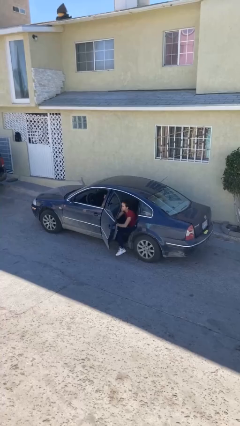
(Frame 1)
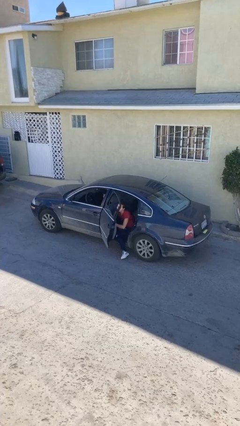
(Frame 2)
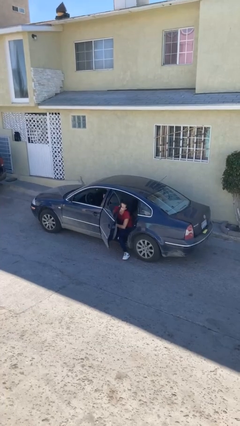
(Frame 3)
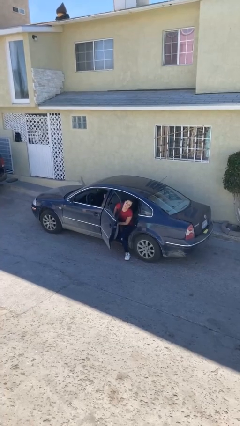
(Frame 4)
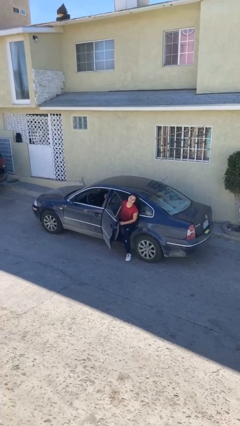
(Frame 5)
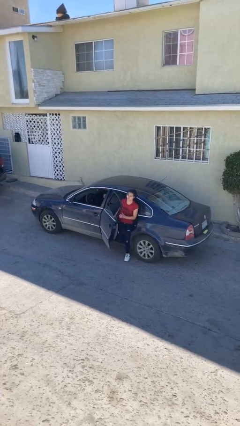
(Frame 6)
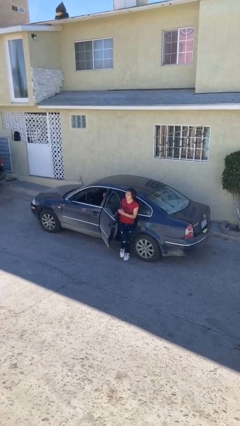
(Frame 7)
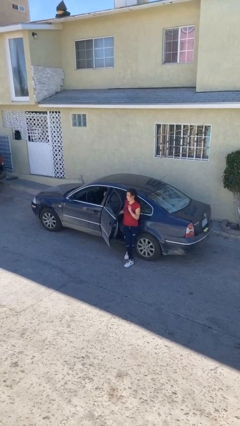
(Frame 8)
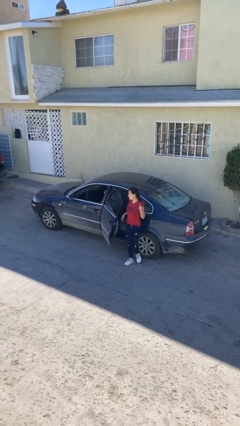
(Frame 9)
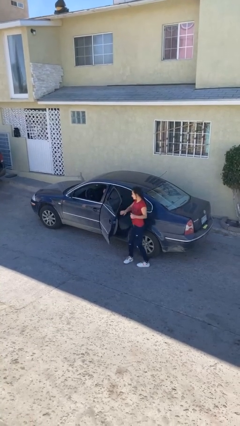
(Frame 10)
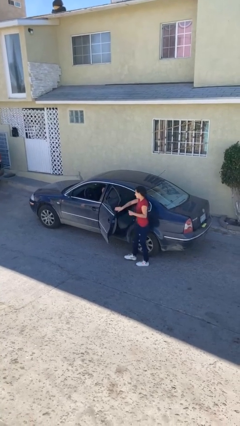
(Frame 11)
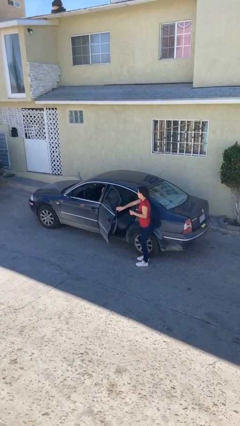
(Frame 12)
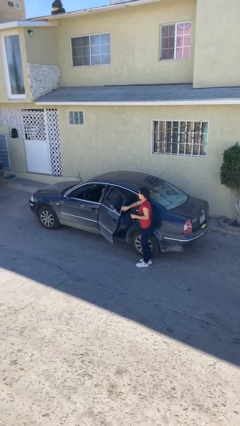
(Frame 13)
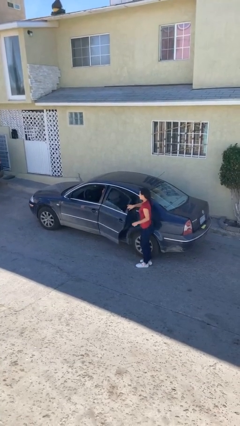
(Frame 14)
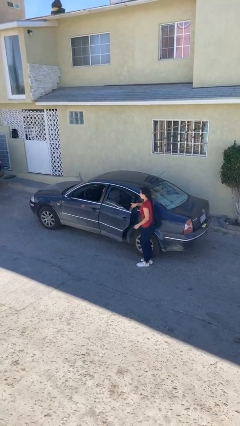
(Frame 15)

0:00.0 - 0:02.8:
car drops off person

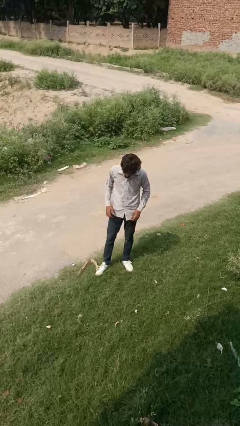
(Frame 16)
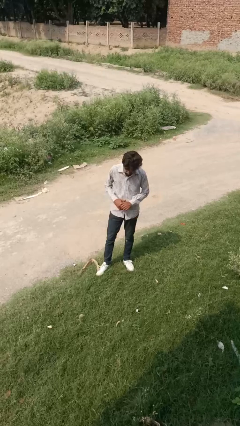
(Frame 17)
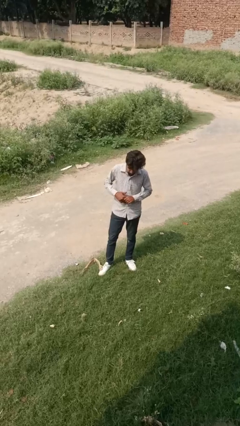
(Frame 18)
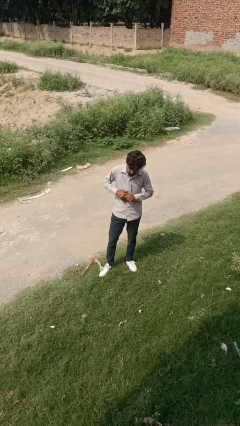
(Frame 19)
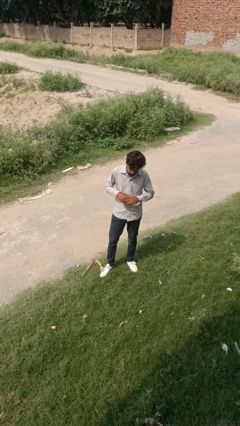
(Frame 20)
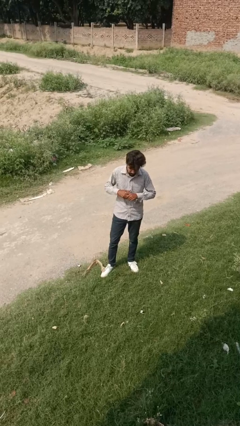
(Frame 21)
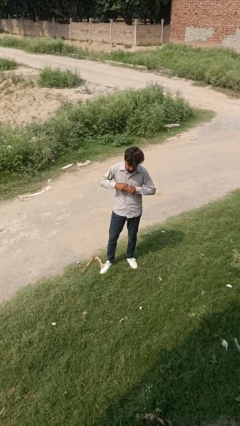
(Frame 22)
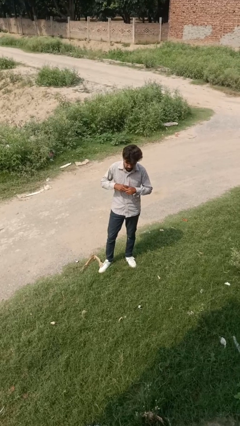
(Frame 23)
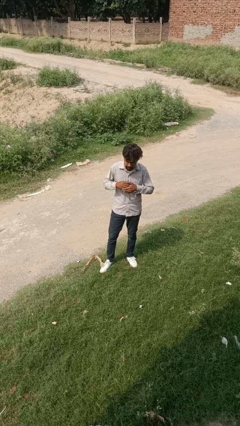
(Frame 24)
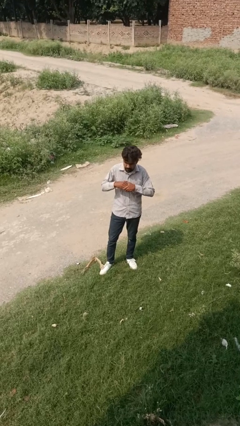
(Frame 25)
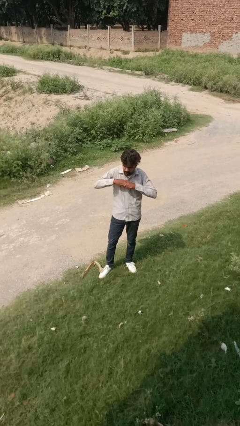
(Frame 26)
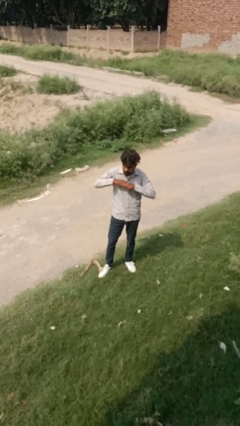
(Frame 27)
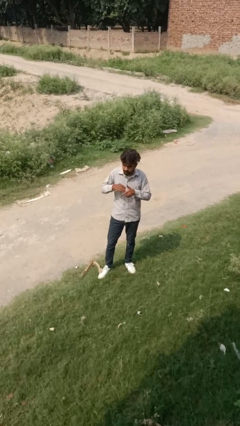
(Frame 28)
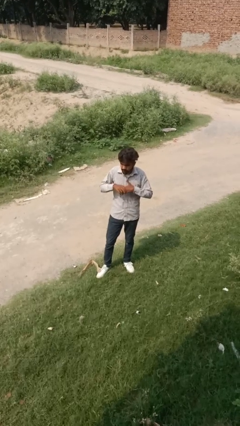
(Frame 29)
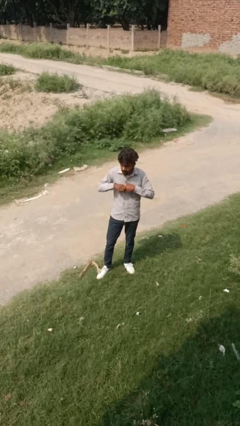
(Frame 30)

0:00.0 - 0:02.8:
person cracks knuckles

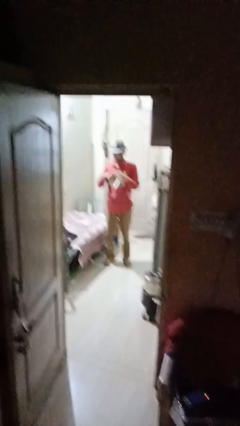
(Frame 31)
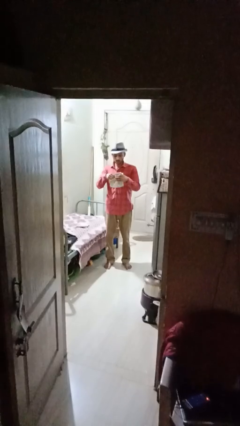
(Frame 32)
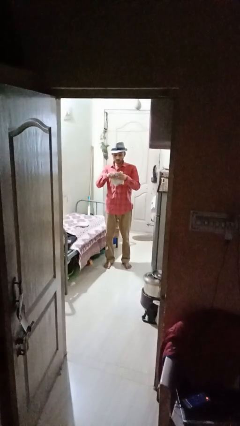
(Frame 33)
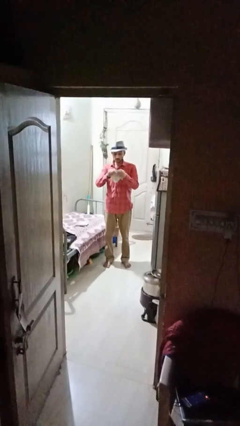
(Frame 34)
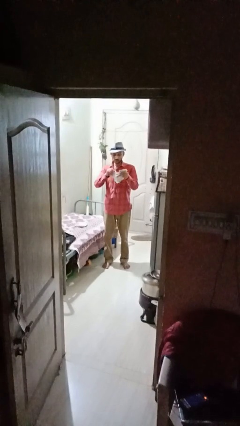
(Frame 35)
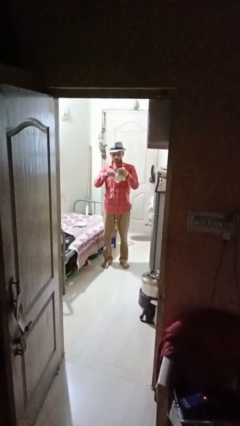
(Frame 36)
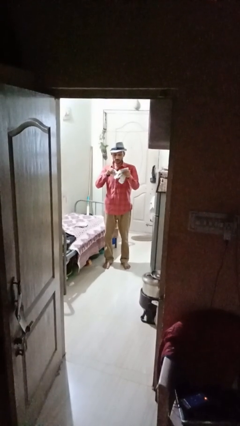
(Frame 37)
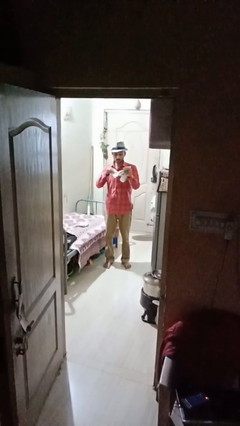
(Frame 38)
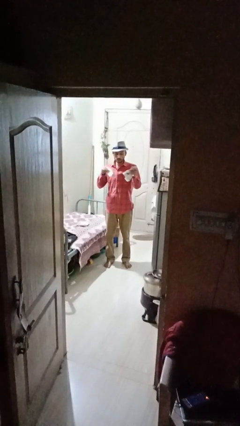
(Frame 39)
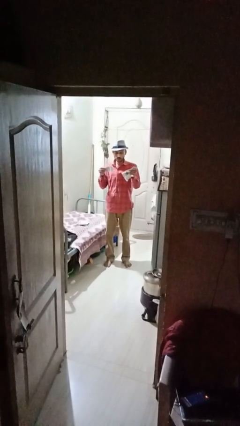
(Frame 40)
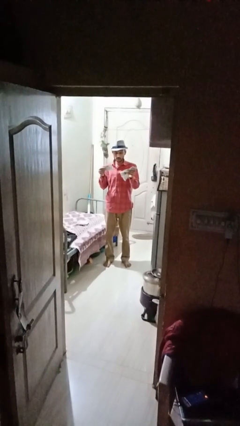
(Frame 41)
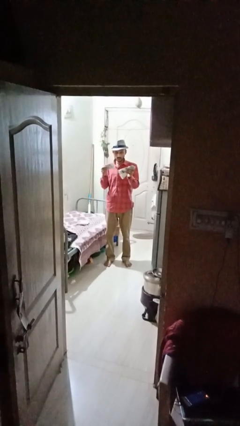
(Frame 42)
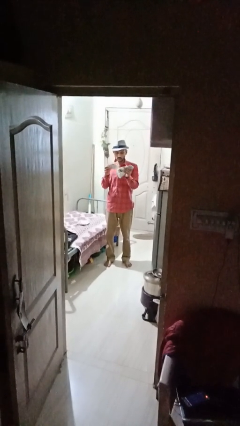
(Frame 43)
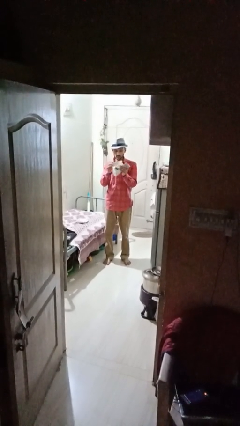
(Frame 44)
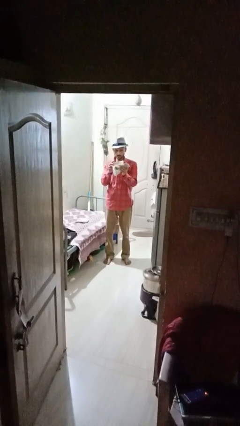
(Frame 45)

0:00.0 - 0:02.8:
person tears paper

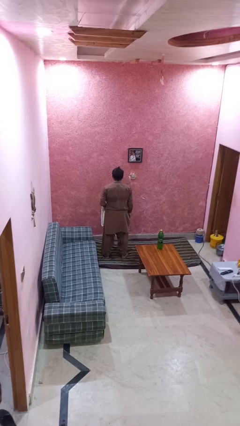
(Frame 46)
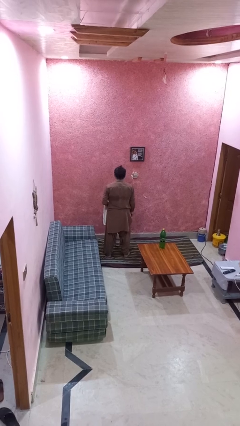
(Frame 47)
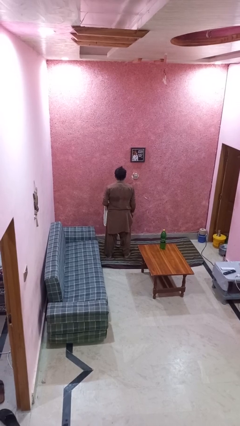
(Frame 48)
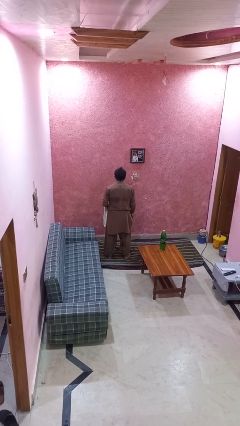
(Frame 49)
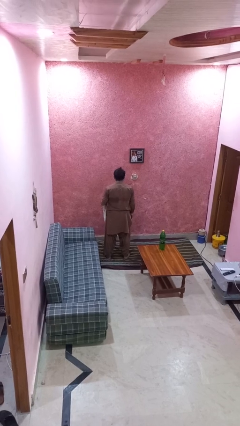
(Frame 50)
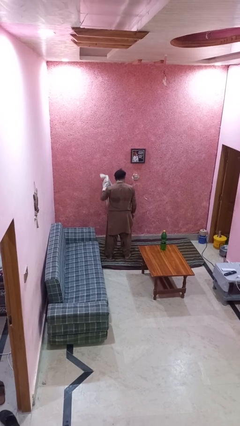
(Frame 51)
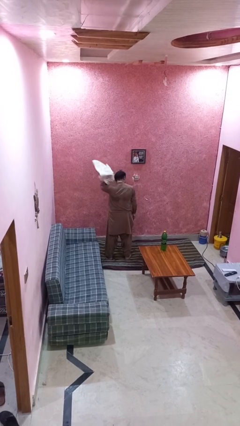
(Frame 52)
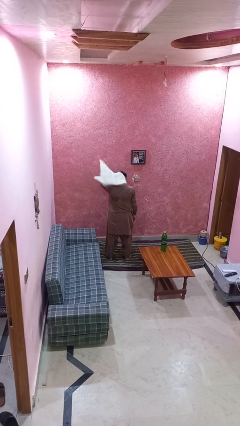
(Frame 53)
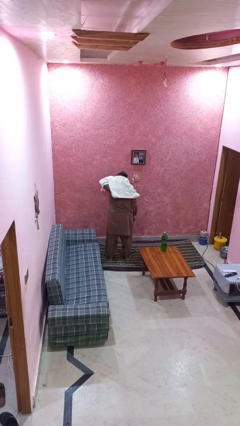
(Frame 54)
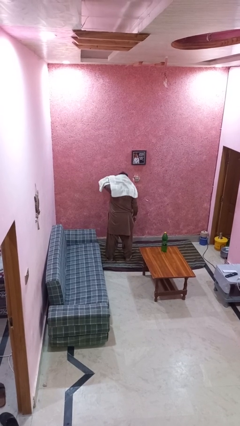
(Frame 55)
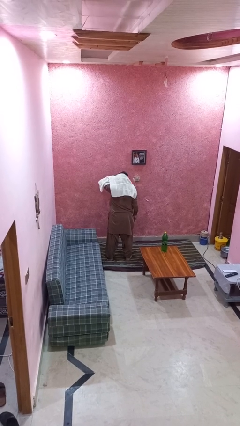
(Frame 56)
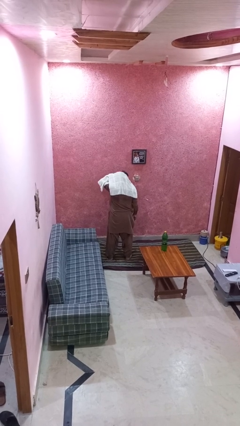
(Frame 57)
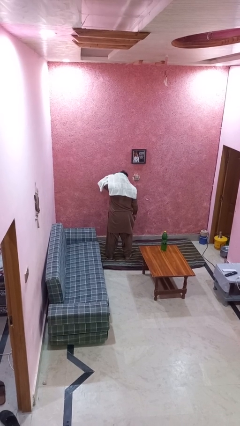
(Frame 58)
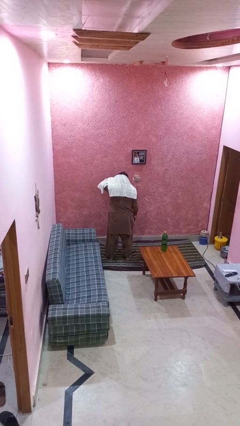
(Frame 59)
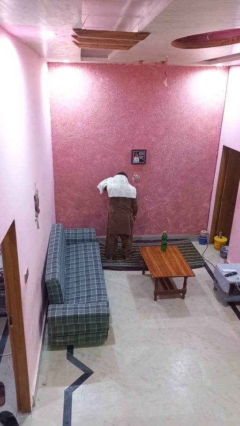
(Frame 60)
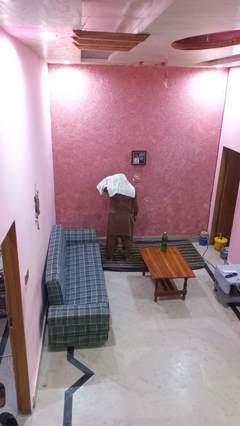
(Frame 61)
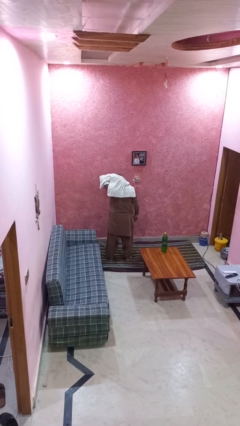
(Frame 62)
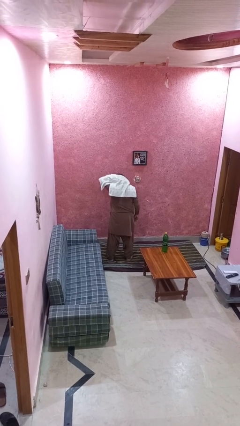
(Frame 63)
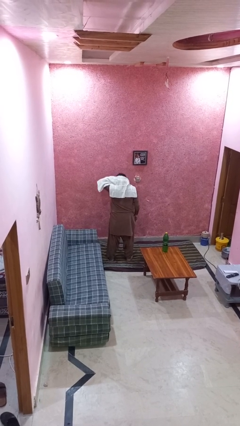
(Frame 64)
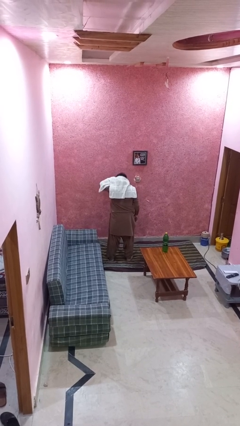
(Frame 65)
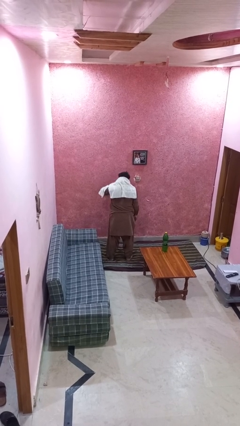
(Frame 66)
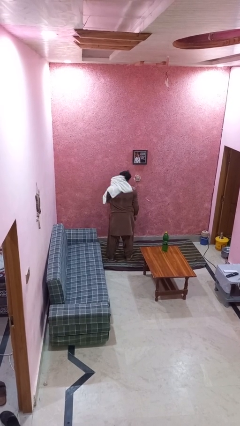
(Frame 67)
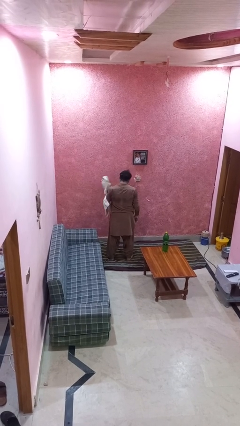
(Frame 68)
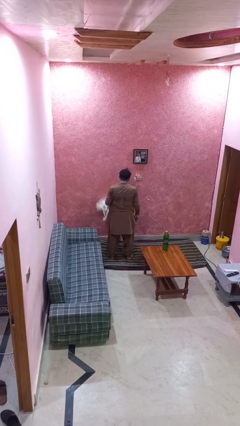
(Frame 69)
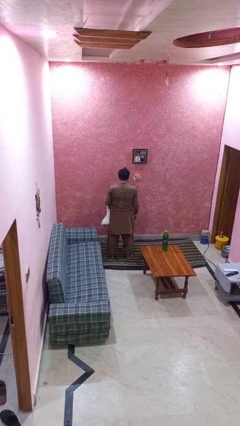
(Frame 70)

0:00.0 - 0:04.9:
person dries hair with towel

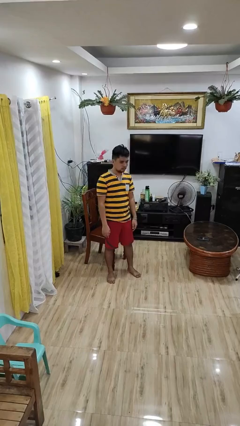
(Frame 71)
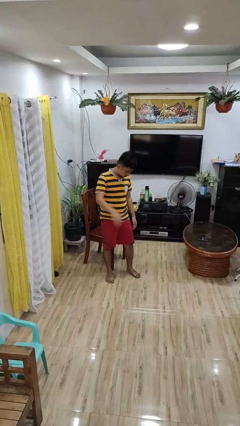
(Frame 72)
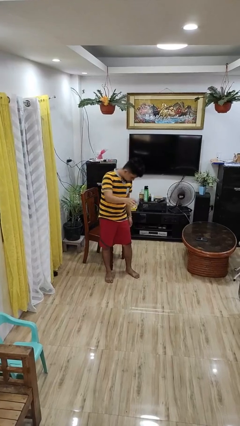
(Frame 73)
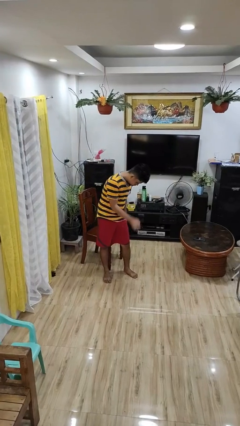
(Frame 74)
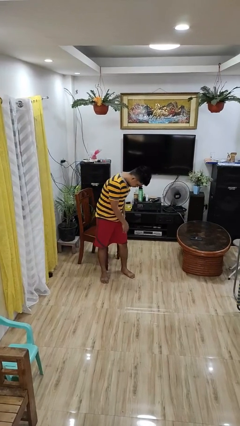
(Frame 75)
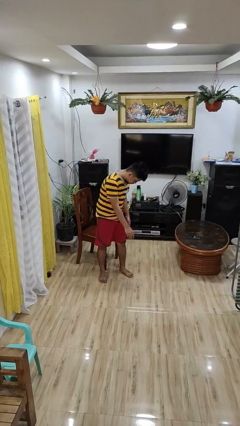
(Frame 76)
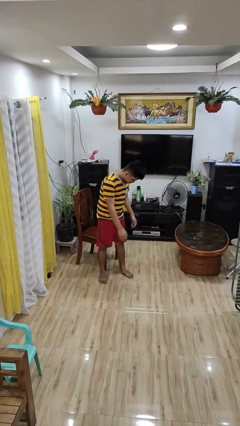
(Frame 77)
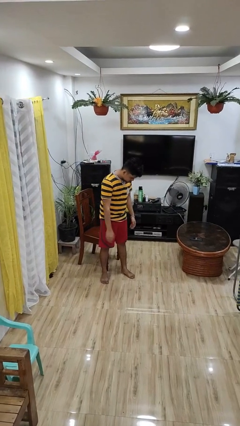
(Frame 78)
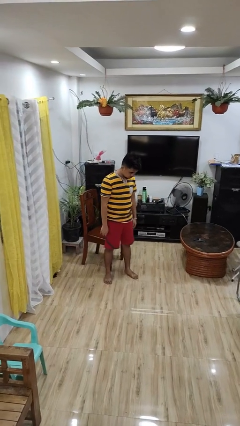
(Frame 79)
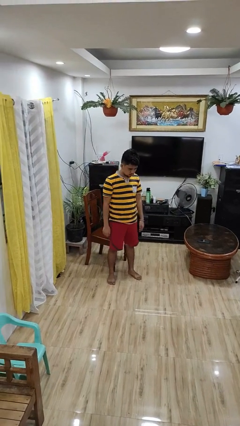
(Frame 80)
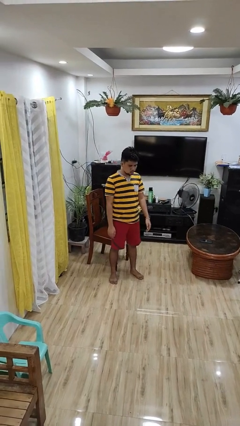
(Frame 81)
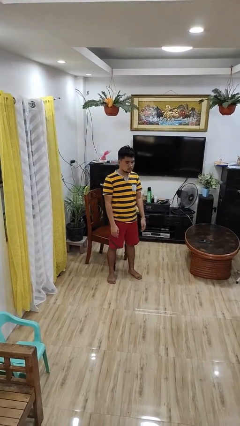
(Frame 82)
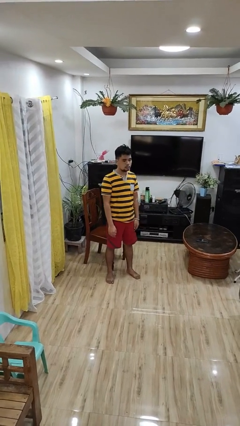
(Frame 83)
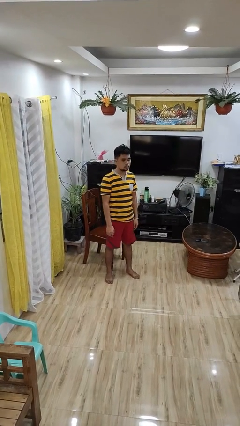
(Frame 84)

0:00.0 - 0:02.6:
person slaps hands on thighs

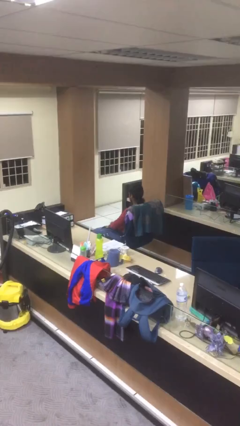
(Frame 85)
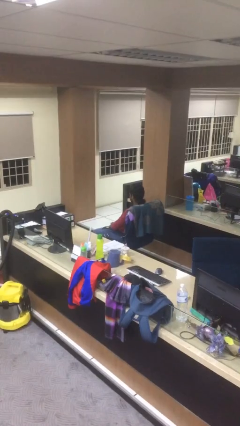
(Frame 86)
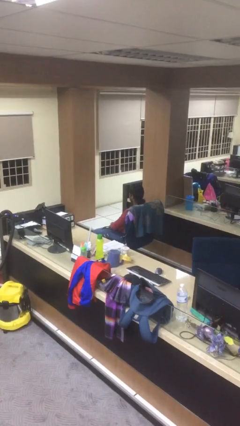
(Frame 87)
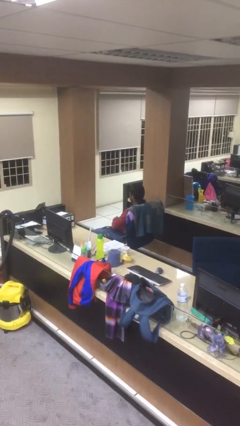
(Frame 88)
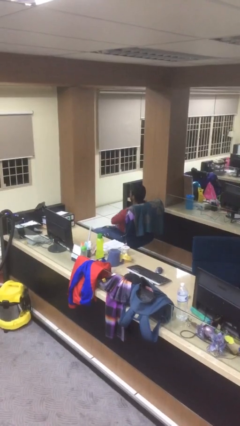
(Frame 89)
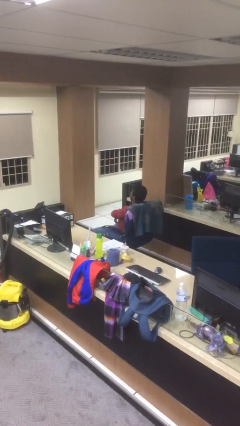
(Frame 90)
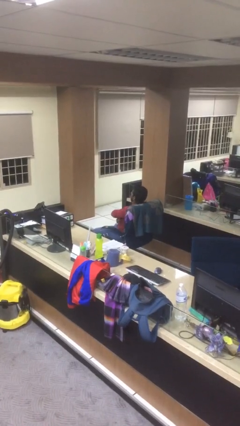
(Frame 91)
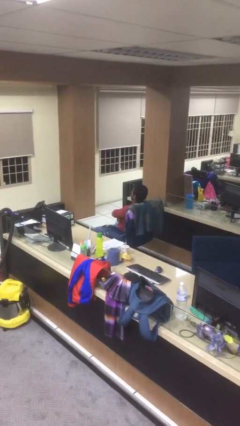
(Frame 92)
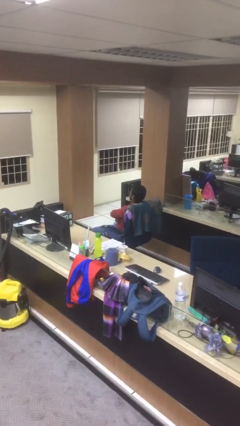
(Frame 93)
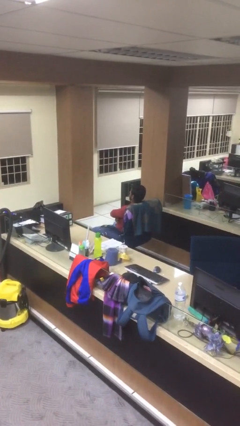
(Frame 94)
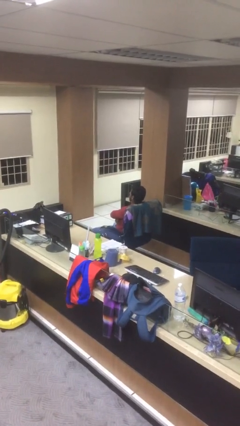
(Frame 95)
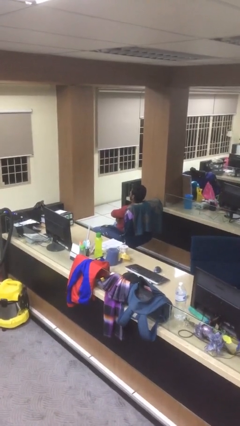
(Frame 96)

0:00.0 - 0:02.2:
person crosses arms
